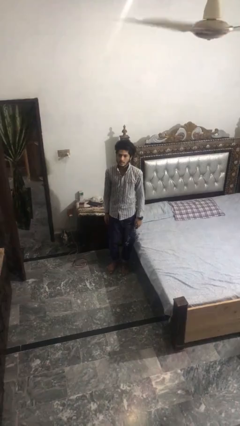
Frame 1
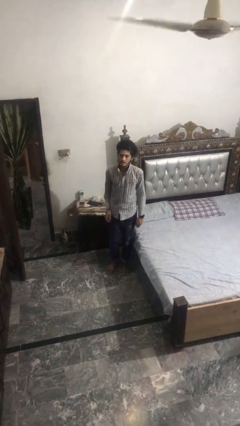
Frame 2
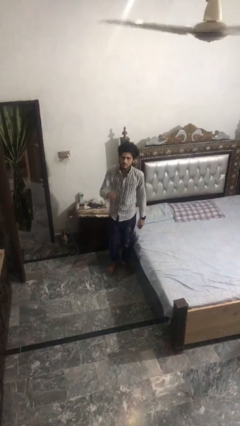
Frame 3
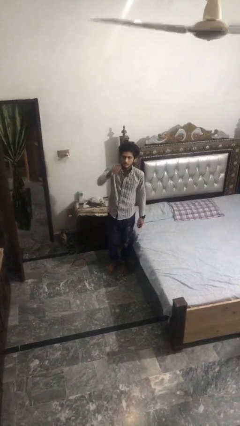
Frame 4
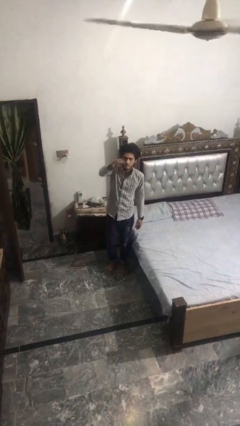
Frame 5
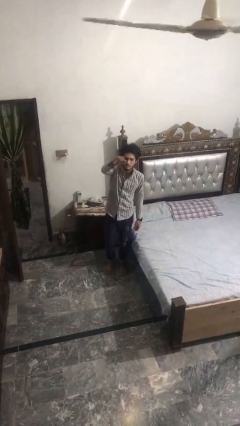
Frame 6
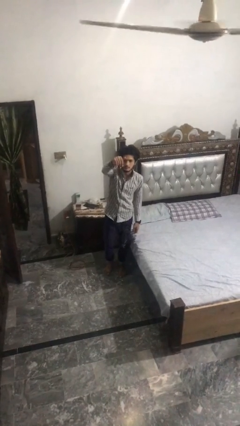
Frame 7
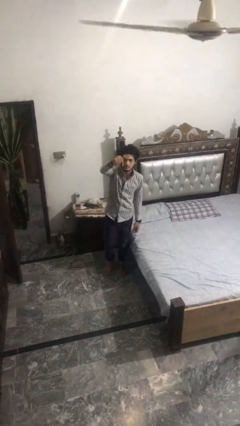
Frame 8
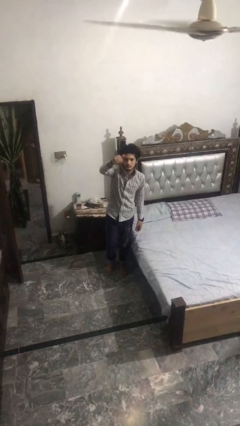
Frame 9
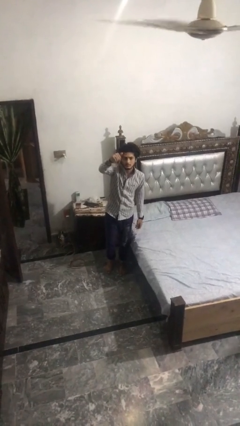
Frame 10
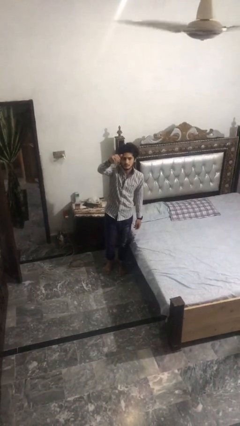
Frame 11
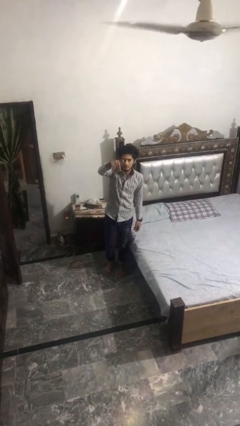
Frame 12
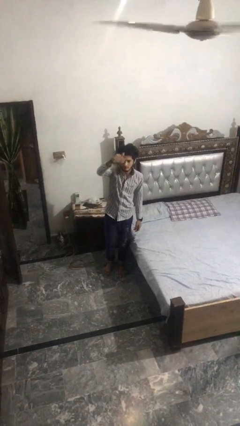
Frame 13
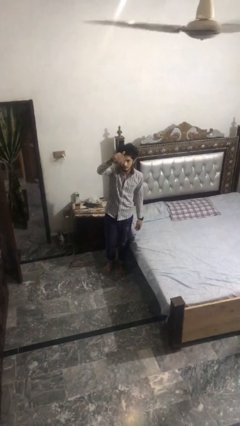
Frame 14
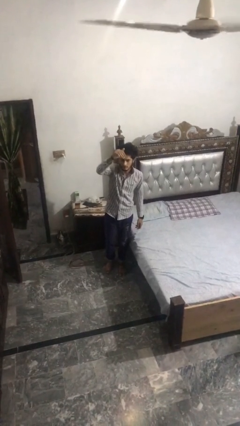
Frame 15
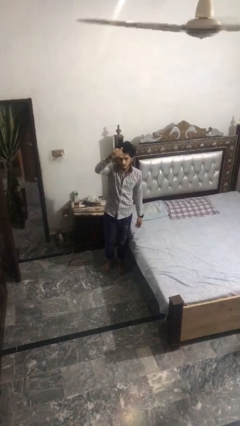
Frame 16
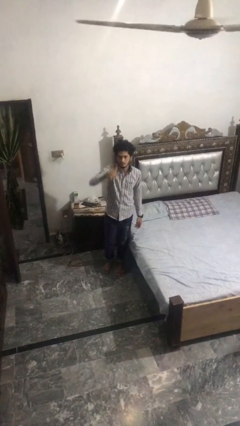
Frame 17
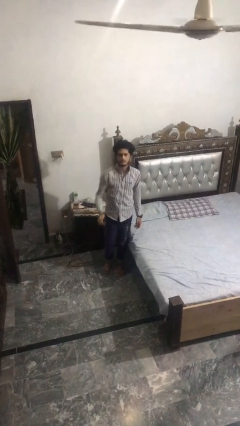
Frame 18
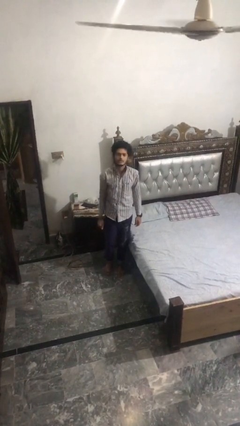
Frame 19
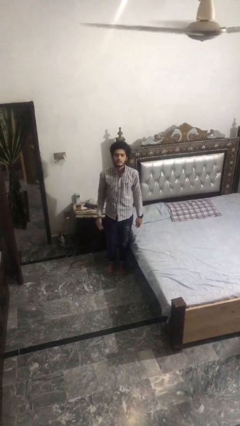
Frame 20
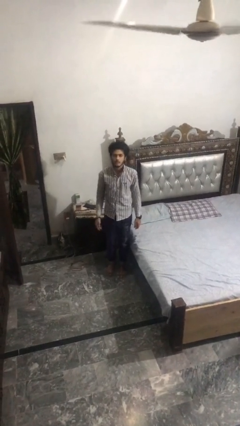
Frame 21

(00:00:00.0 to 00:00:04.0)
person gestures come here

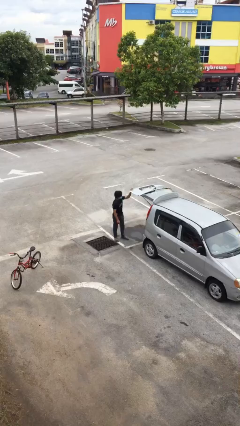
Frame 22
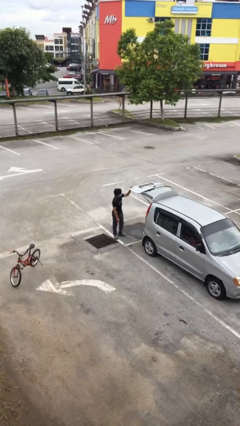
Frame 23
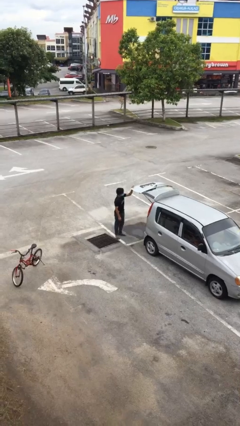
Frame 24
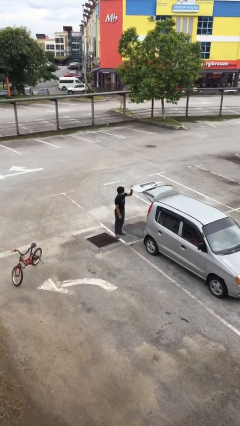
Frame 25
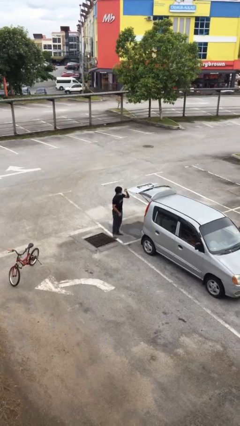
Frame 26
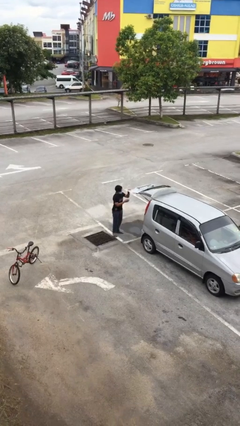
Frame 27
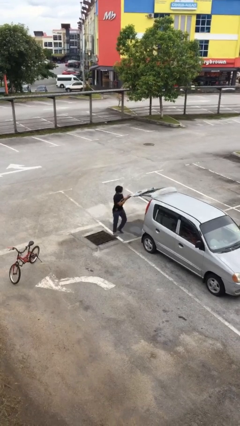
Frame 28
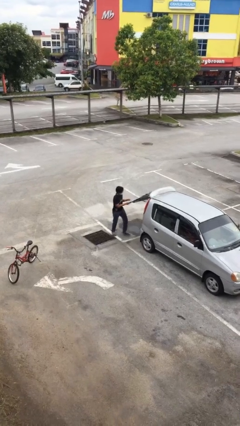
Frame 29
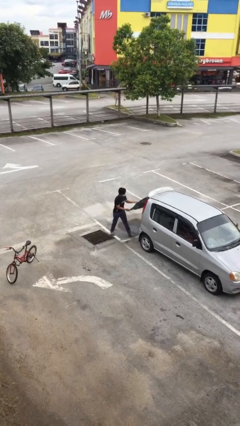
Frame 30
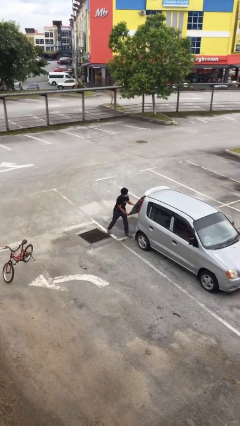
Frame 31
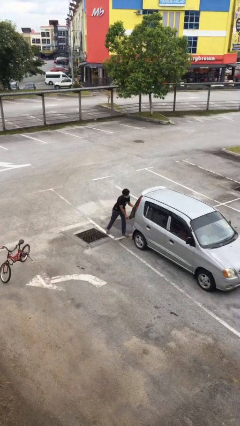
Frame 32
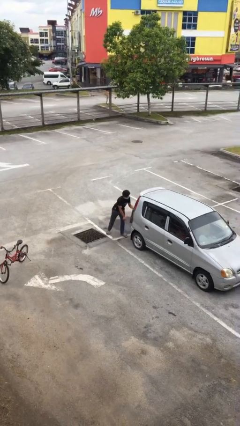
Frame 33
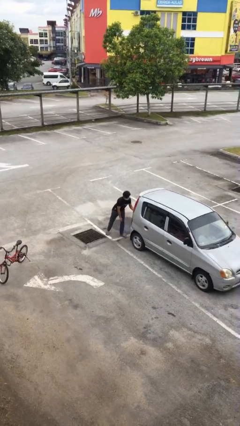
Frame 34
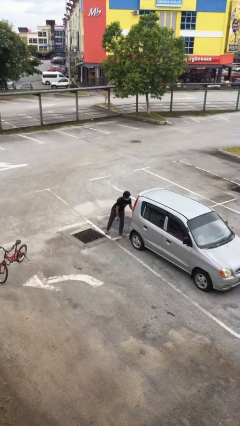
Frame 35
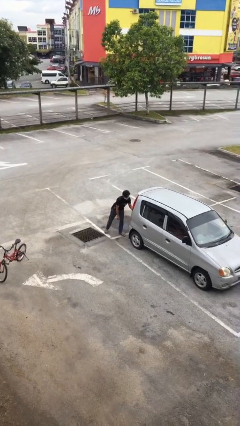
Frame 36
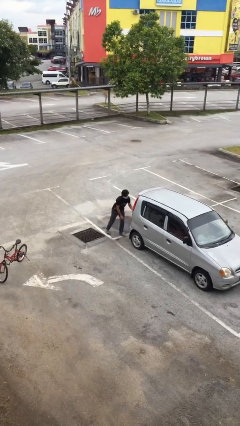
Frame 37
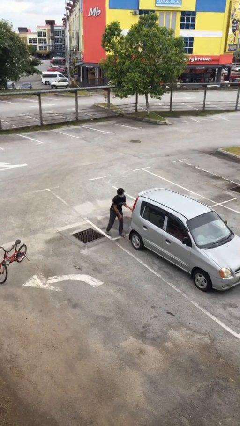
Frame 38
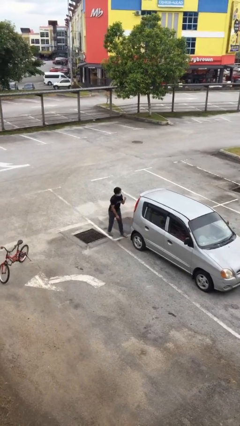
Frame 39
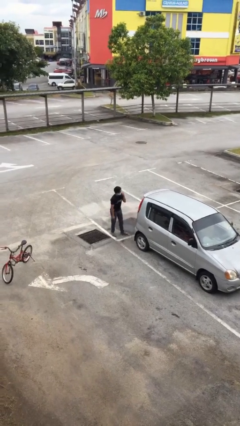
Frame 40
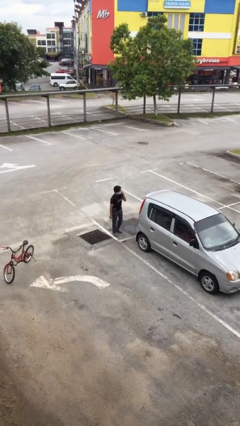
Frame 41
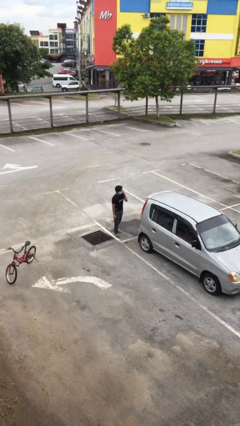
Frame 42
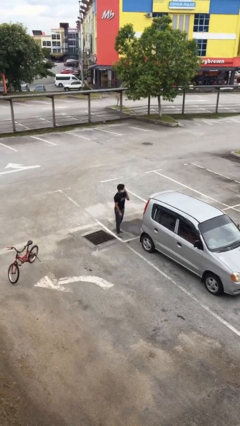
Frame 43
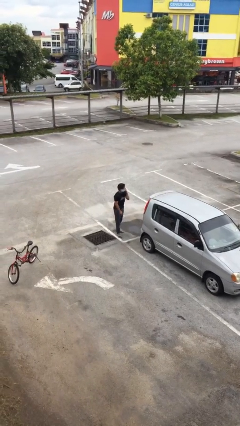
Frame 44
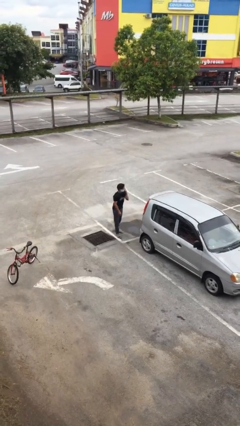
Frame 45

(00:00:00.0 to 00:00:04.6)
person closes car trunk

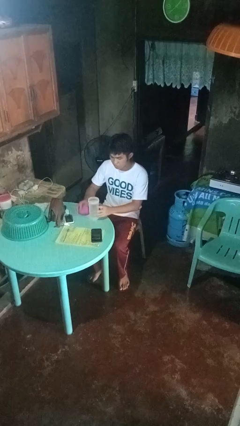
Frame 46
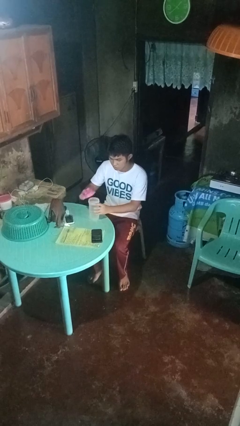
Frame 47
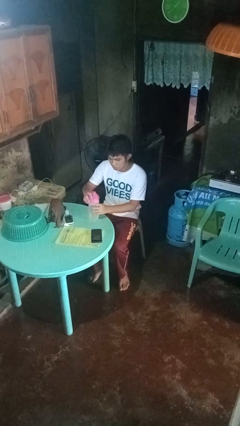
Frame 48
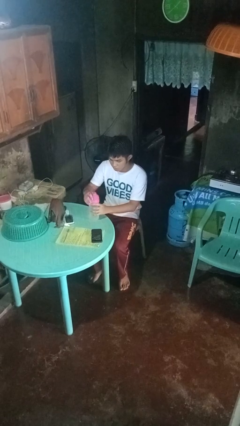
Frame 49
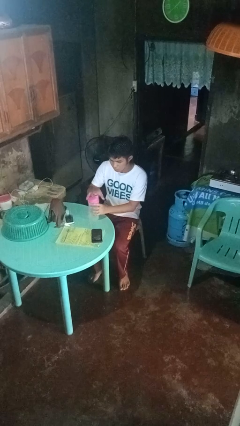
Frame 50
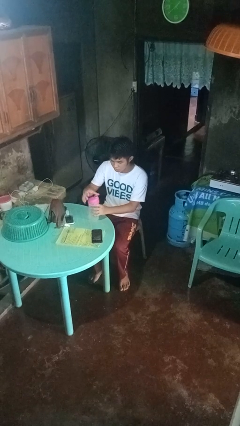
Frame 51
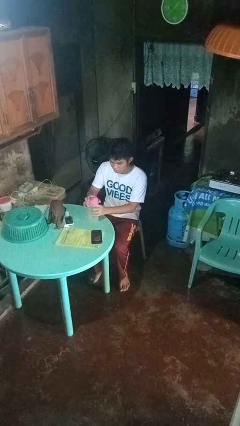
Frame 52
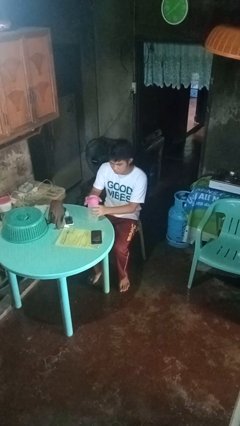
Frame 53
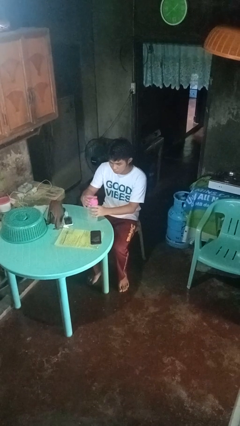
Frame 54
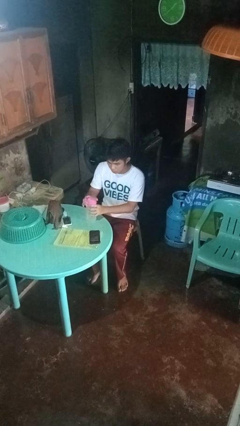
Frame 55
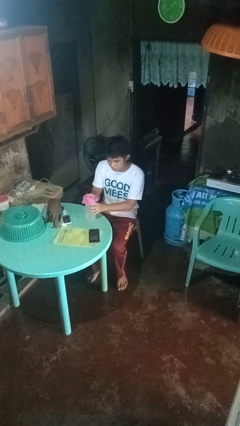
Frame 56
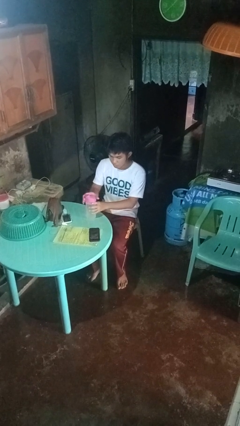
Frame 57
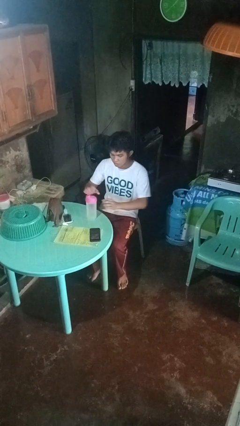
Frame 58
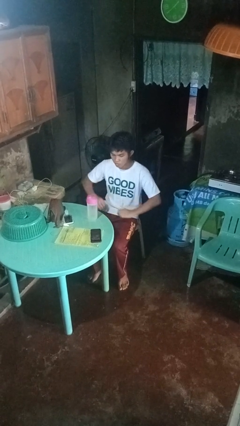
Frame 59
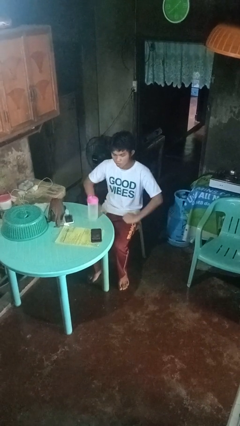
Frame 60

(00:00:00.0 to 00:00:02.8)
person screws lid to bottle

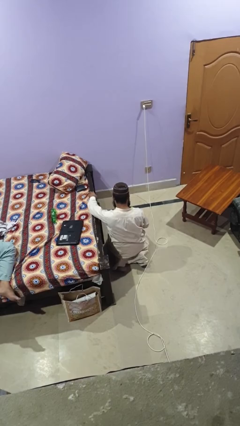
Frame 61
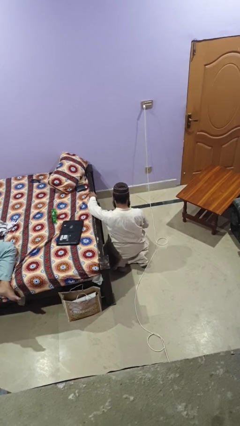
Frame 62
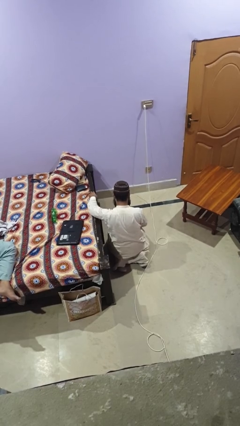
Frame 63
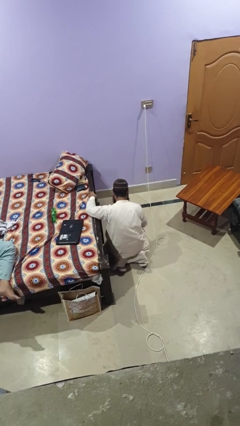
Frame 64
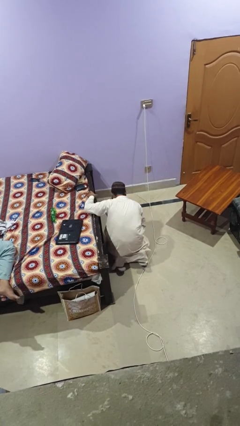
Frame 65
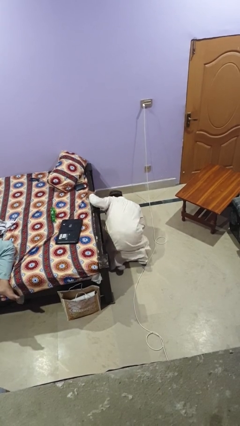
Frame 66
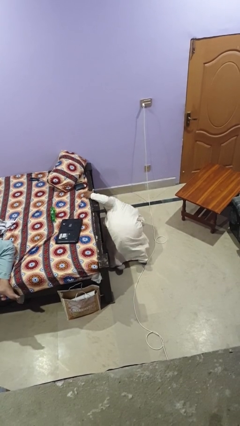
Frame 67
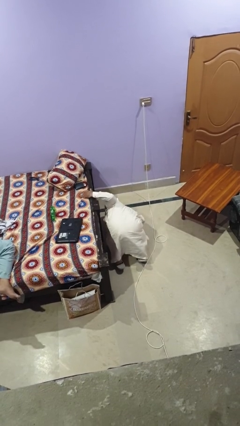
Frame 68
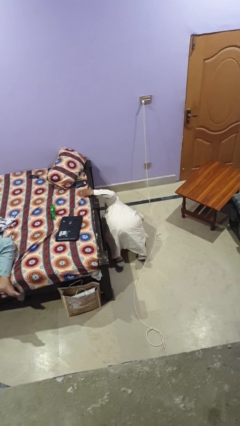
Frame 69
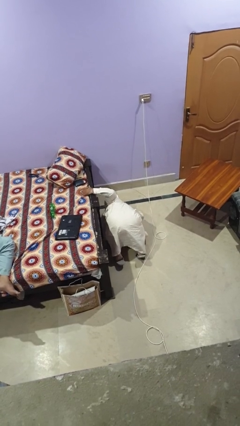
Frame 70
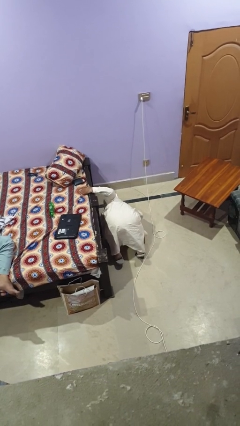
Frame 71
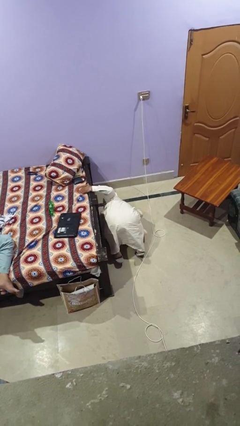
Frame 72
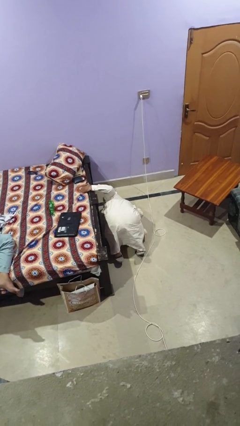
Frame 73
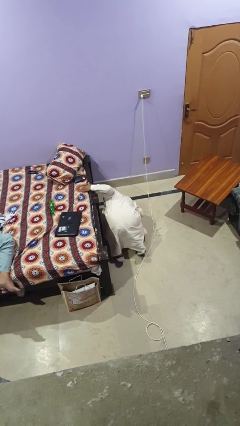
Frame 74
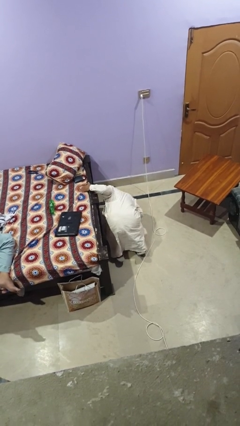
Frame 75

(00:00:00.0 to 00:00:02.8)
person searches under bed

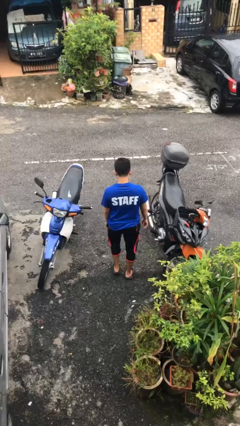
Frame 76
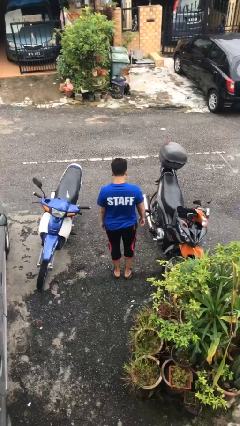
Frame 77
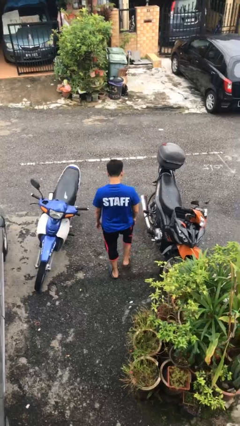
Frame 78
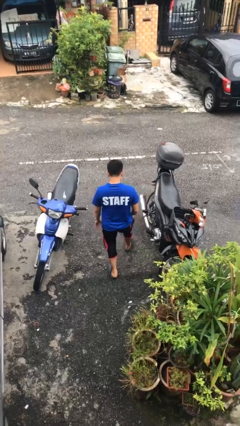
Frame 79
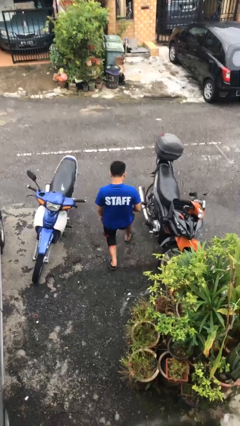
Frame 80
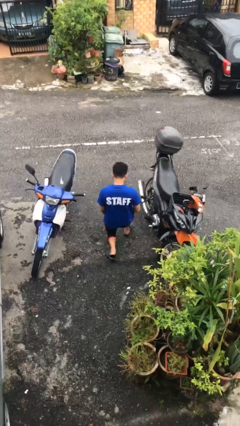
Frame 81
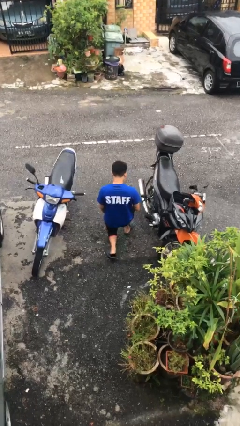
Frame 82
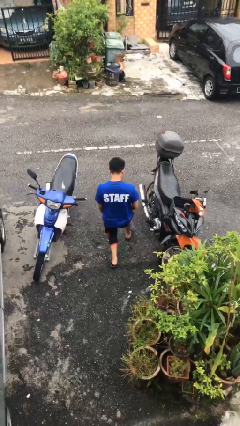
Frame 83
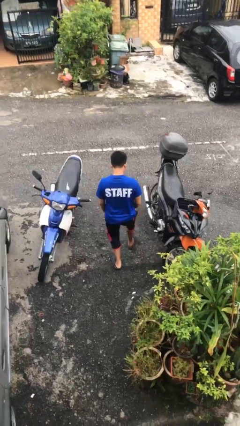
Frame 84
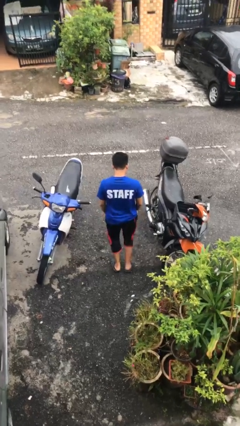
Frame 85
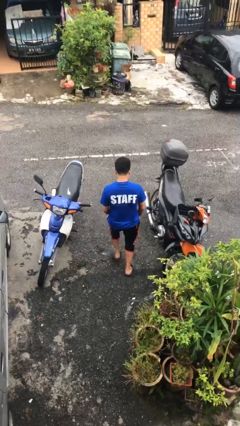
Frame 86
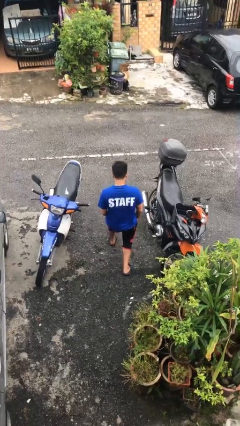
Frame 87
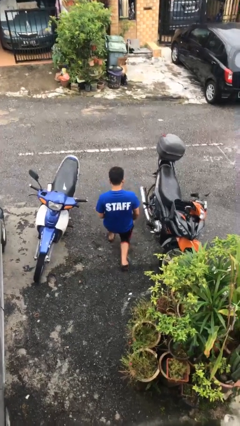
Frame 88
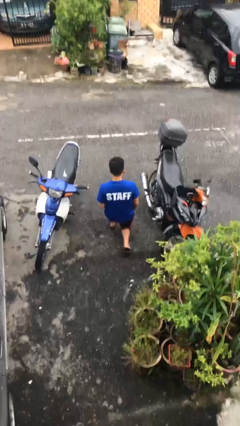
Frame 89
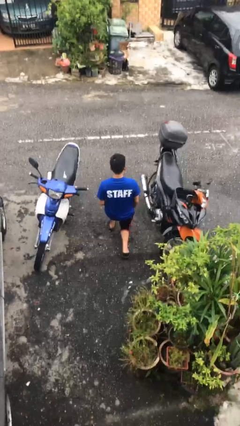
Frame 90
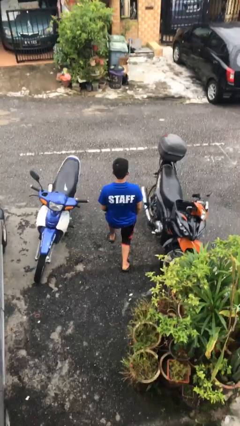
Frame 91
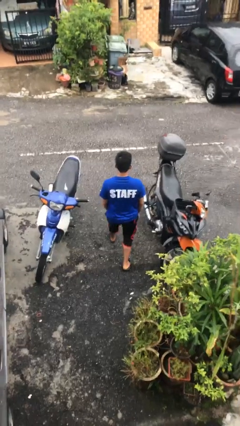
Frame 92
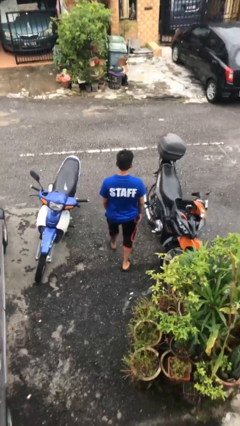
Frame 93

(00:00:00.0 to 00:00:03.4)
person exercises with lunges
